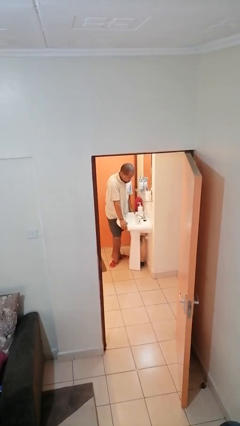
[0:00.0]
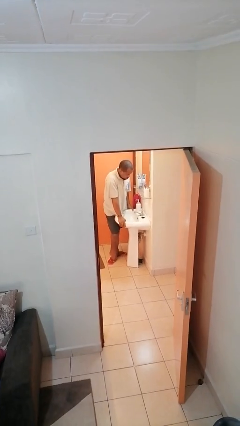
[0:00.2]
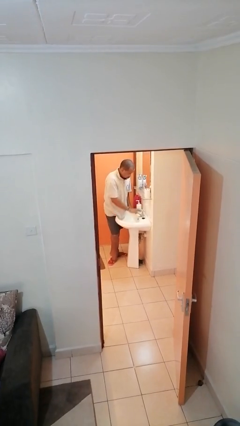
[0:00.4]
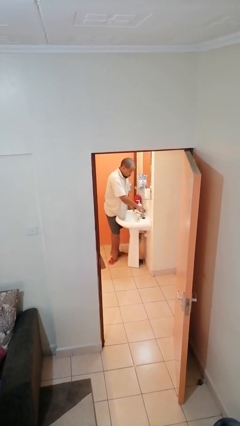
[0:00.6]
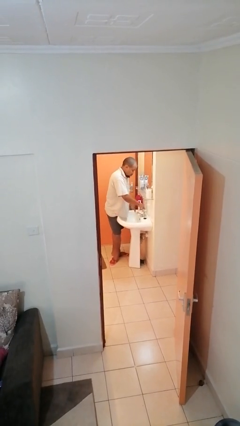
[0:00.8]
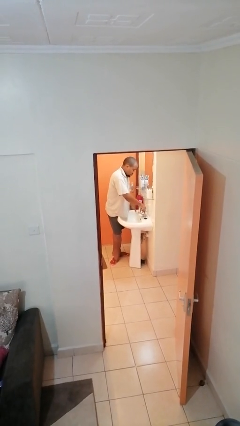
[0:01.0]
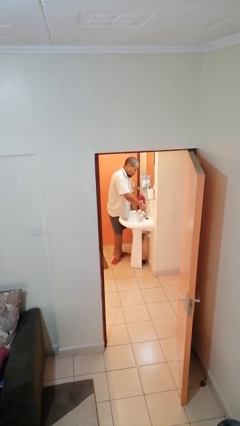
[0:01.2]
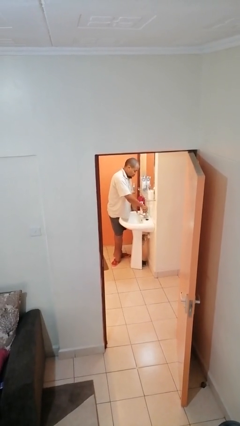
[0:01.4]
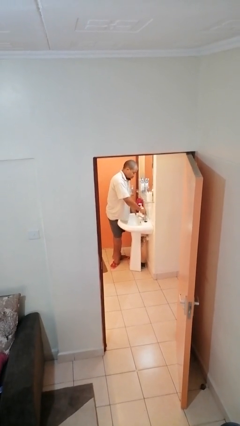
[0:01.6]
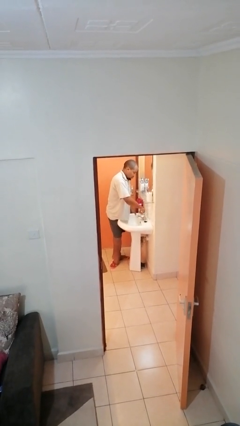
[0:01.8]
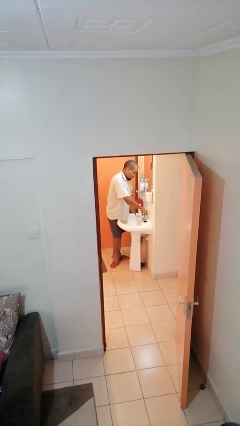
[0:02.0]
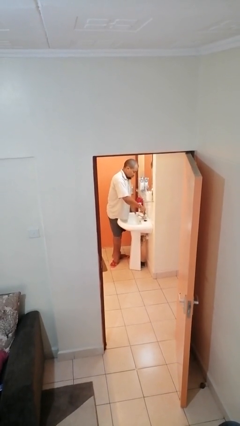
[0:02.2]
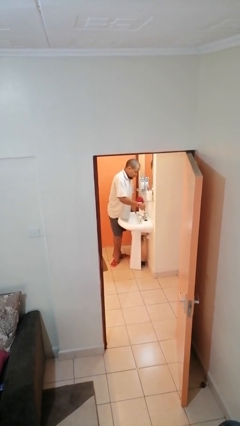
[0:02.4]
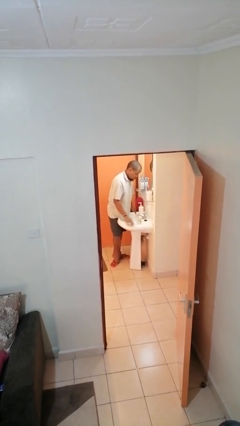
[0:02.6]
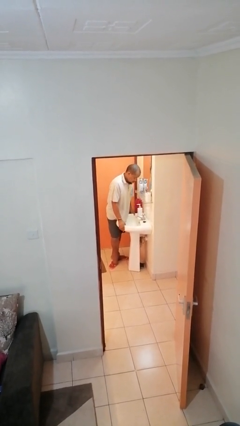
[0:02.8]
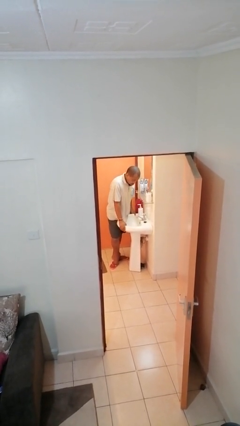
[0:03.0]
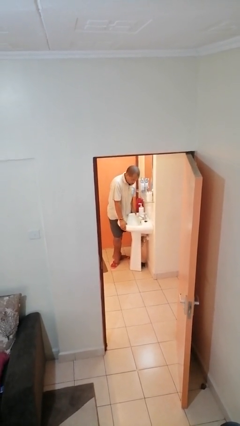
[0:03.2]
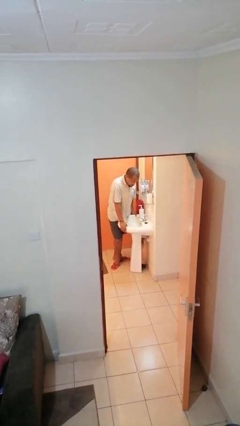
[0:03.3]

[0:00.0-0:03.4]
person turns off faucet

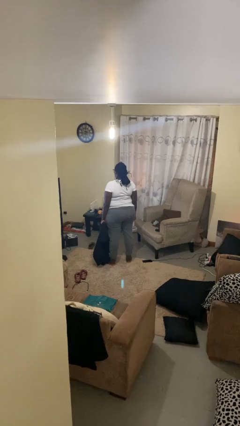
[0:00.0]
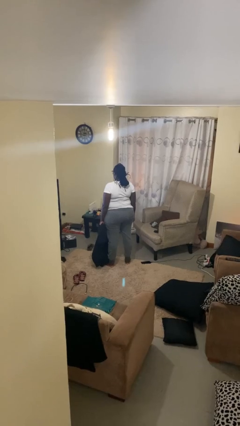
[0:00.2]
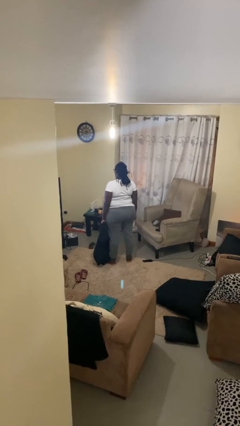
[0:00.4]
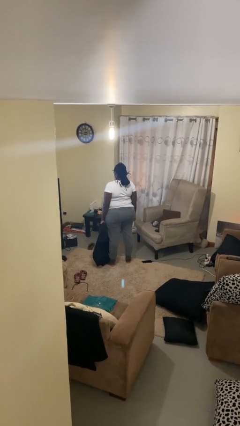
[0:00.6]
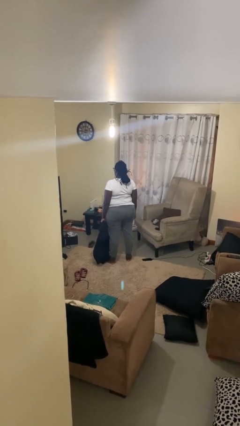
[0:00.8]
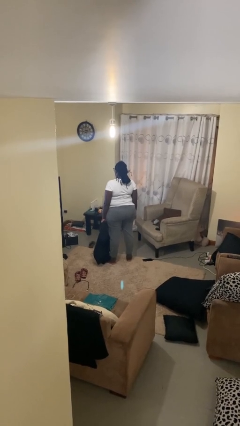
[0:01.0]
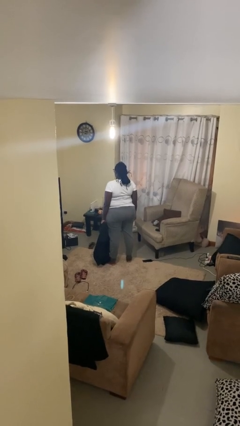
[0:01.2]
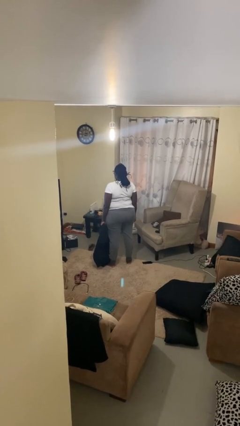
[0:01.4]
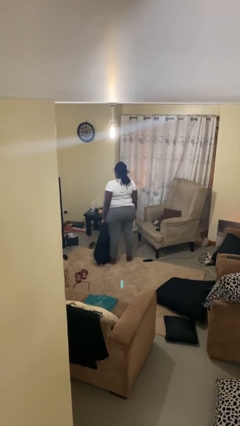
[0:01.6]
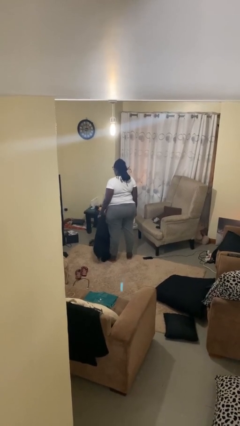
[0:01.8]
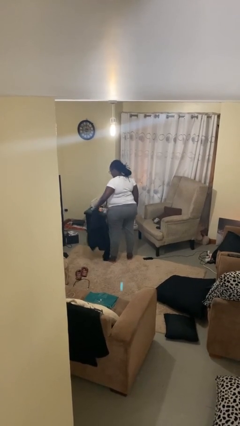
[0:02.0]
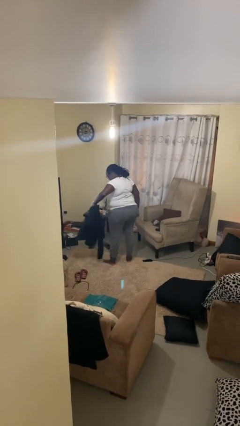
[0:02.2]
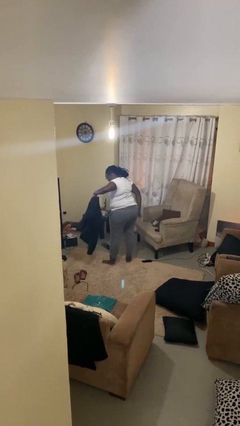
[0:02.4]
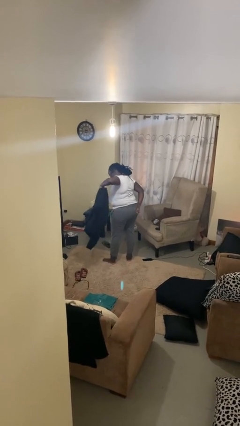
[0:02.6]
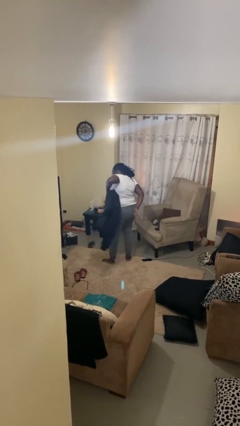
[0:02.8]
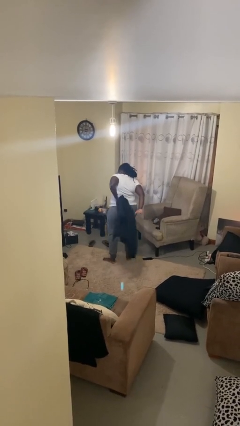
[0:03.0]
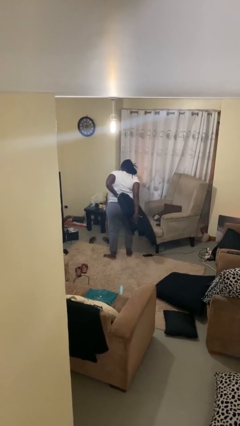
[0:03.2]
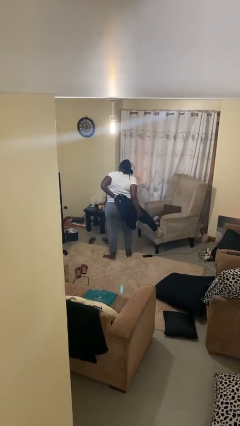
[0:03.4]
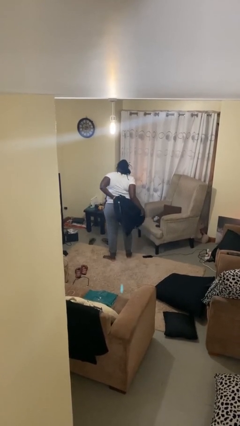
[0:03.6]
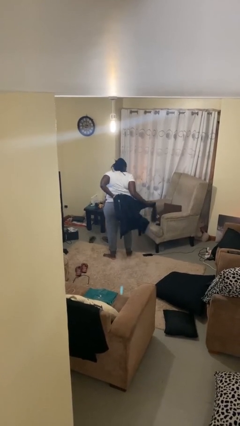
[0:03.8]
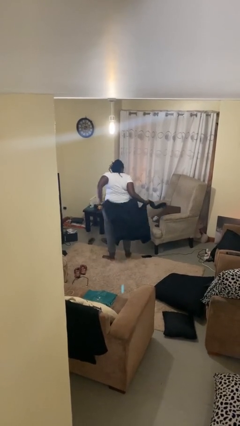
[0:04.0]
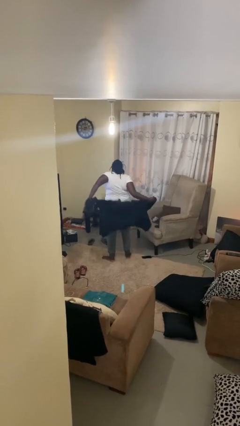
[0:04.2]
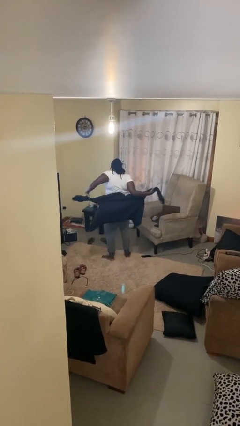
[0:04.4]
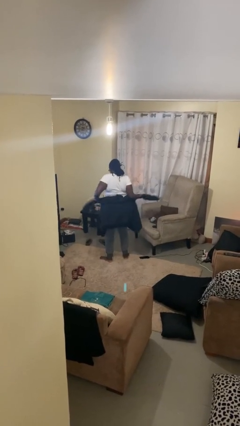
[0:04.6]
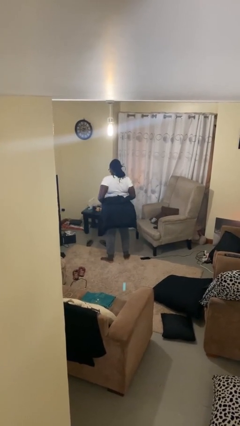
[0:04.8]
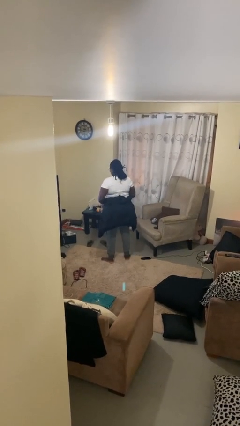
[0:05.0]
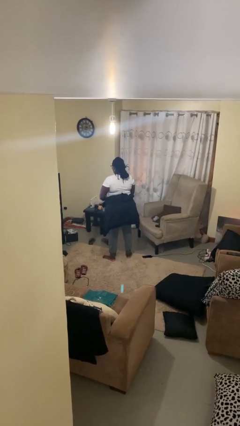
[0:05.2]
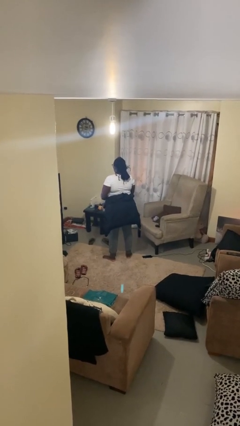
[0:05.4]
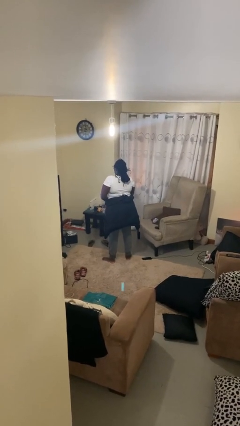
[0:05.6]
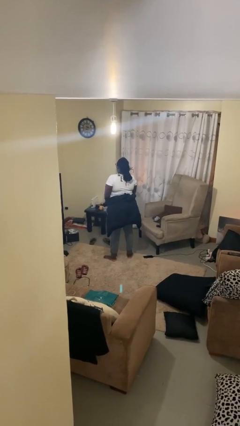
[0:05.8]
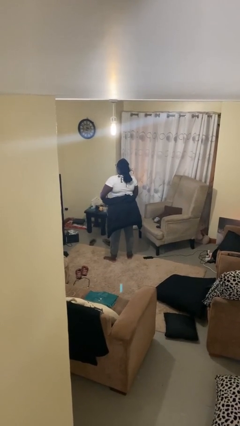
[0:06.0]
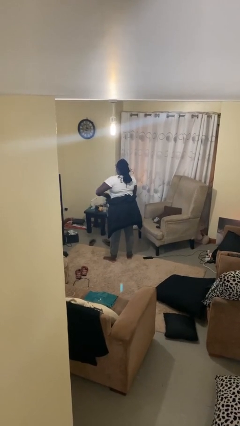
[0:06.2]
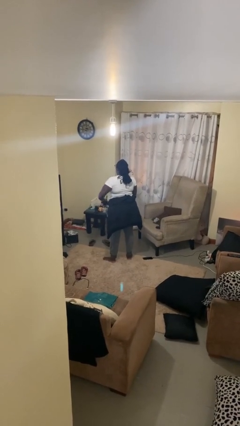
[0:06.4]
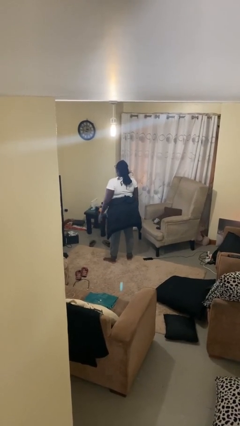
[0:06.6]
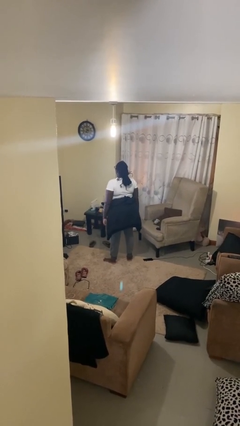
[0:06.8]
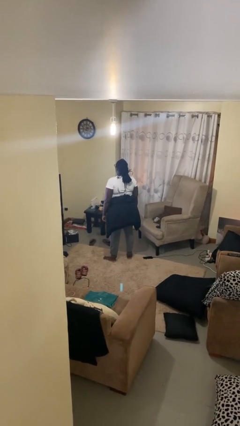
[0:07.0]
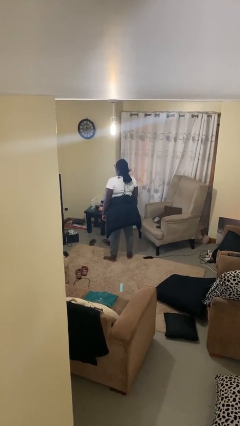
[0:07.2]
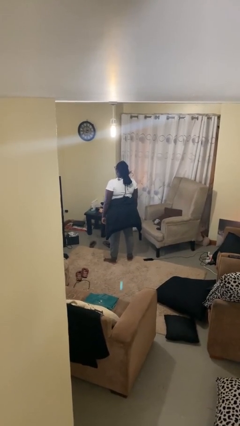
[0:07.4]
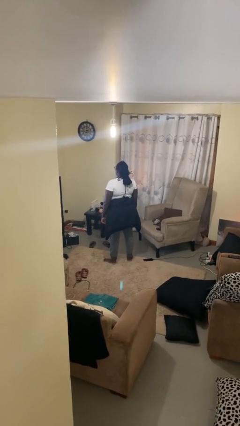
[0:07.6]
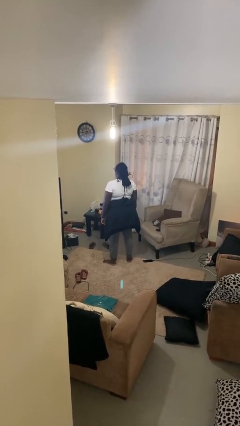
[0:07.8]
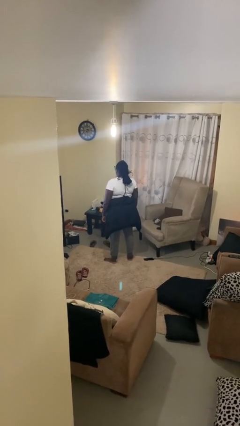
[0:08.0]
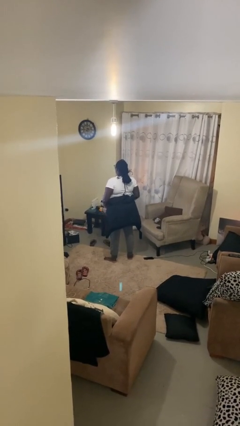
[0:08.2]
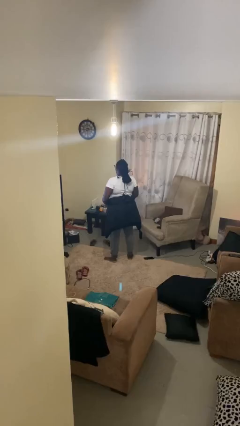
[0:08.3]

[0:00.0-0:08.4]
person ties jacket around waist

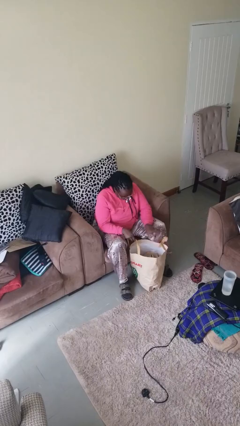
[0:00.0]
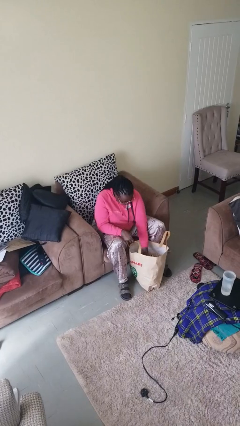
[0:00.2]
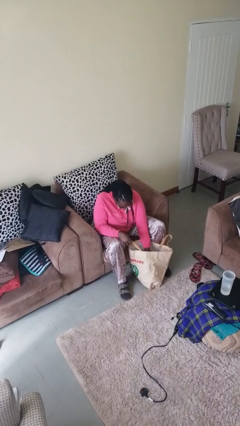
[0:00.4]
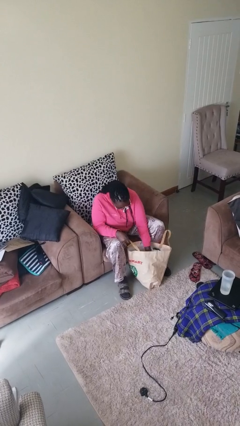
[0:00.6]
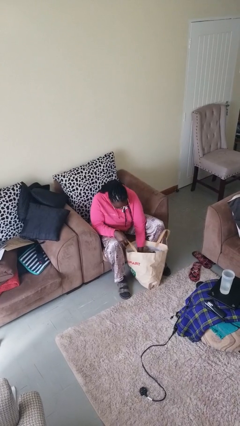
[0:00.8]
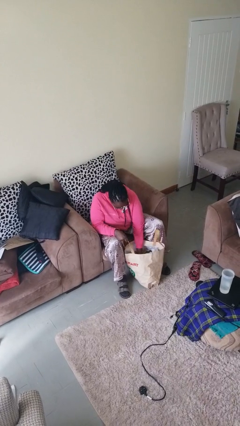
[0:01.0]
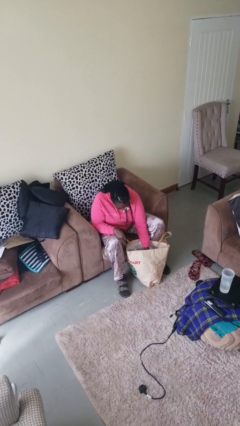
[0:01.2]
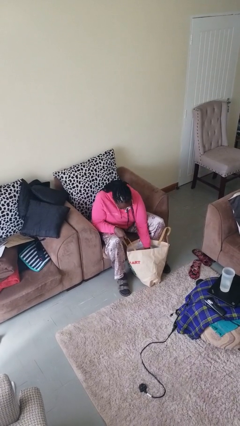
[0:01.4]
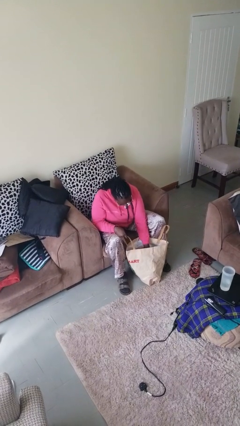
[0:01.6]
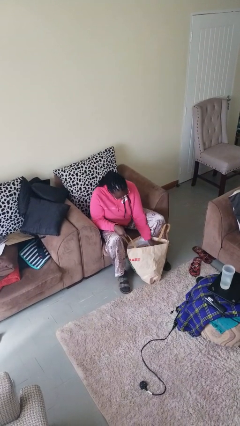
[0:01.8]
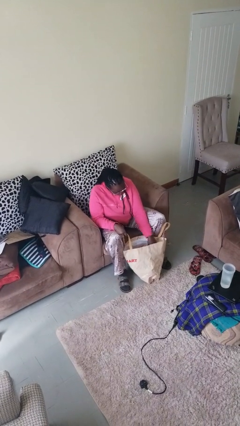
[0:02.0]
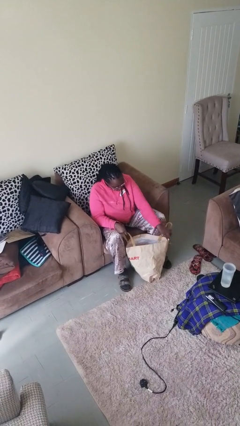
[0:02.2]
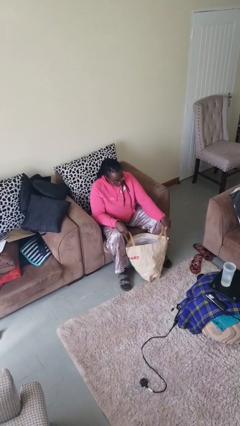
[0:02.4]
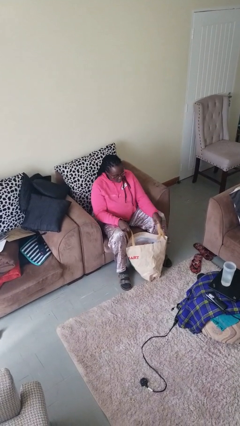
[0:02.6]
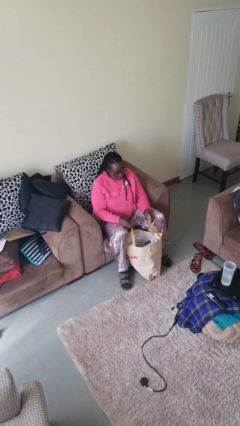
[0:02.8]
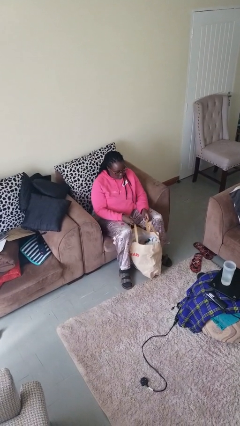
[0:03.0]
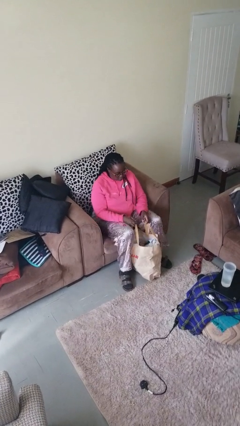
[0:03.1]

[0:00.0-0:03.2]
person searches in bag

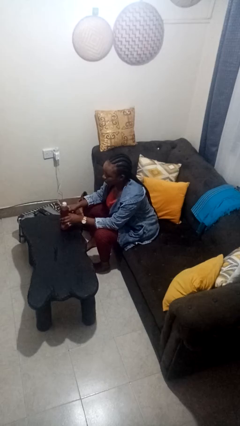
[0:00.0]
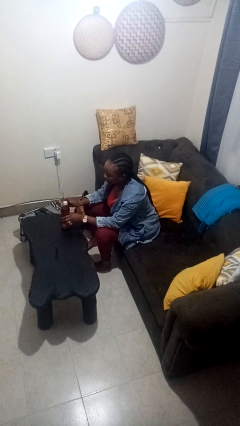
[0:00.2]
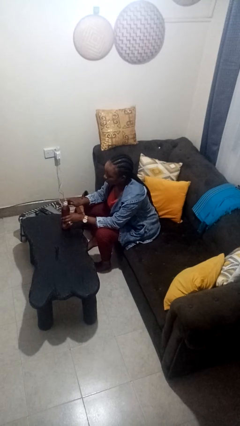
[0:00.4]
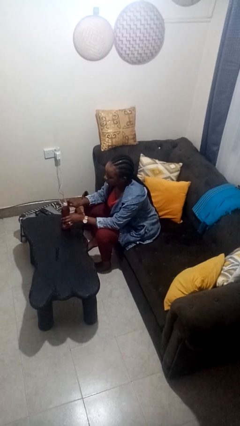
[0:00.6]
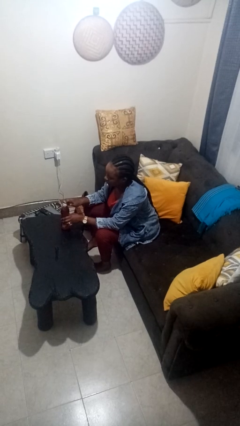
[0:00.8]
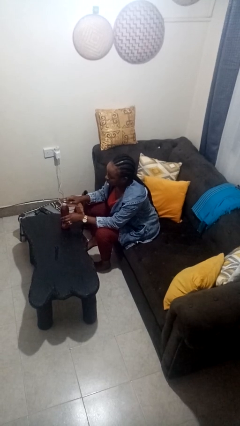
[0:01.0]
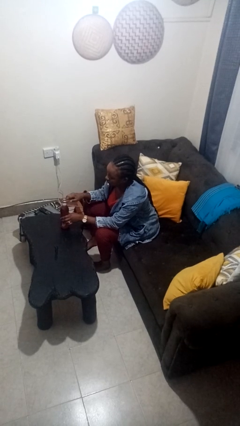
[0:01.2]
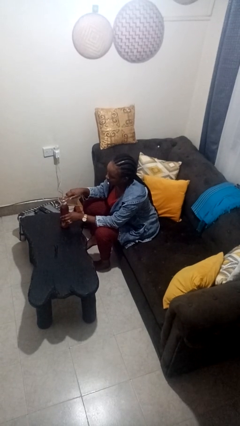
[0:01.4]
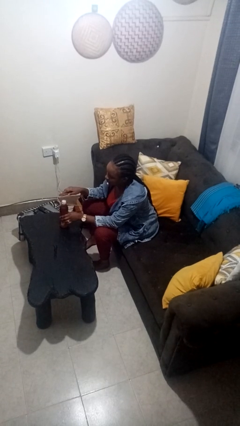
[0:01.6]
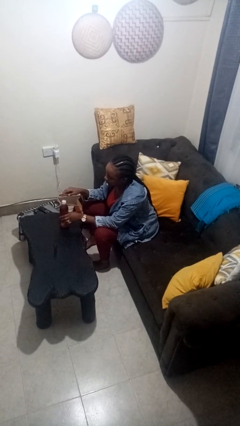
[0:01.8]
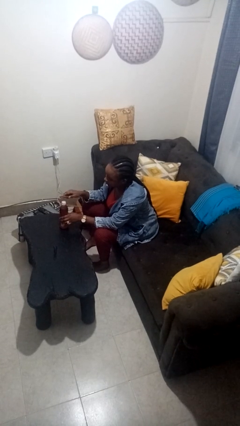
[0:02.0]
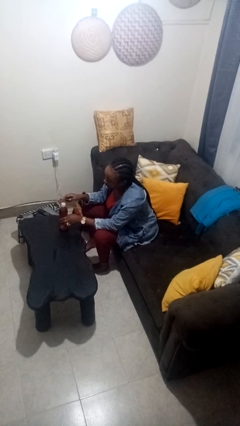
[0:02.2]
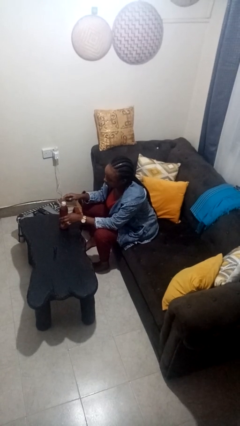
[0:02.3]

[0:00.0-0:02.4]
person opens can with can opener

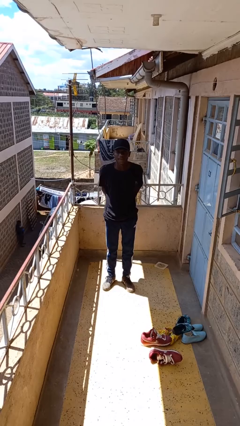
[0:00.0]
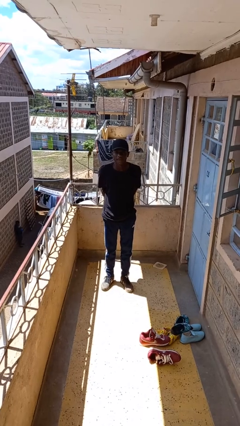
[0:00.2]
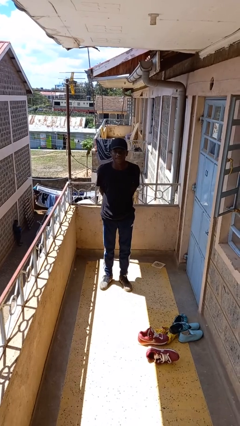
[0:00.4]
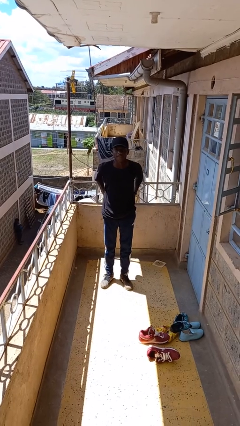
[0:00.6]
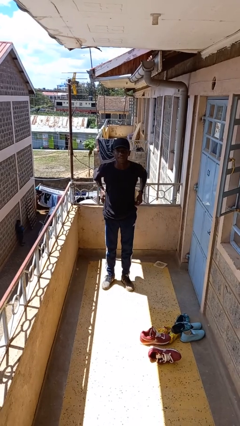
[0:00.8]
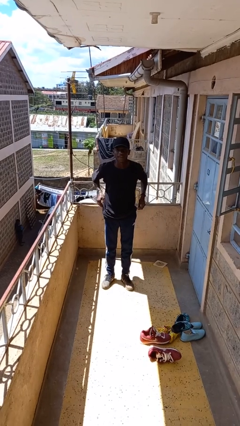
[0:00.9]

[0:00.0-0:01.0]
person puts hands in back pockets
